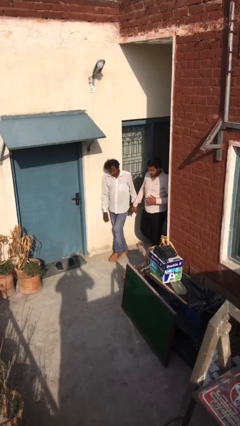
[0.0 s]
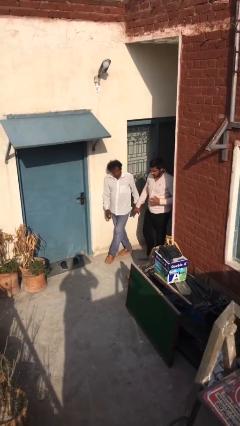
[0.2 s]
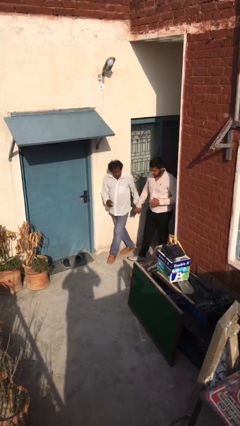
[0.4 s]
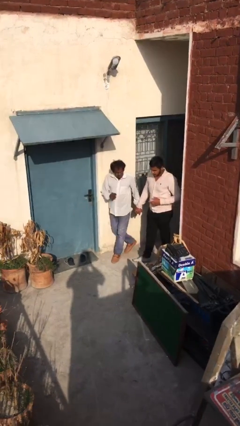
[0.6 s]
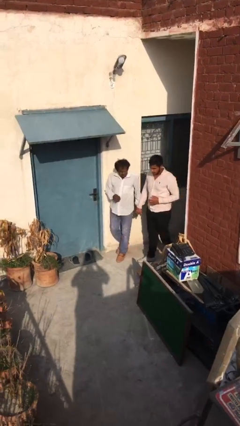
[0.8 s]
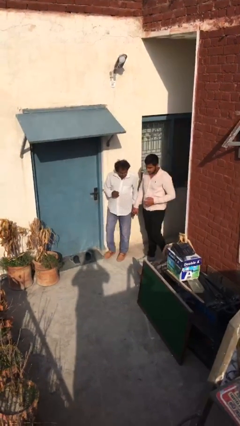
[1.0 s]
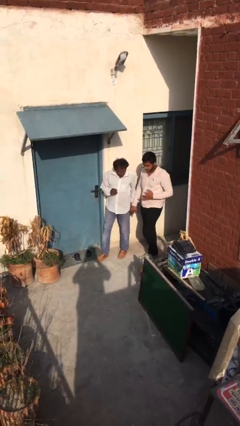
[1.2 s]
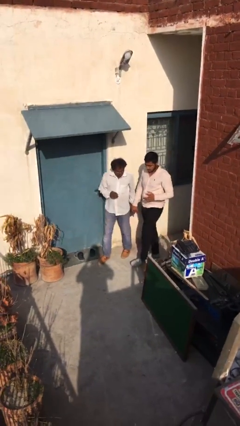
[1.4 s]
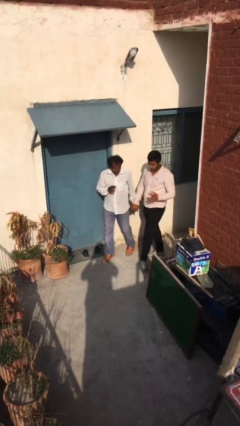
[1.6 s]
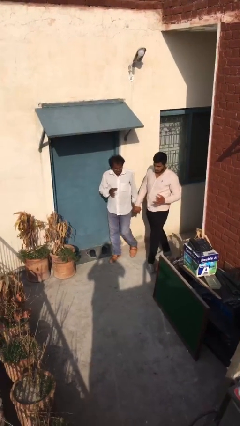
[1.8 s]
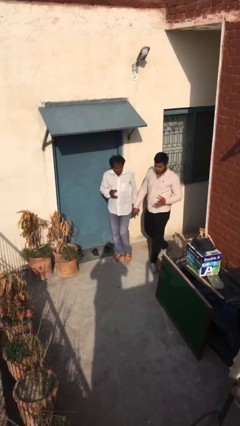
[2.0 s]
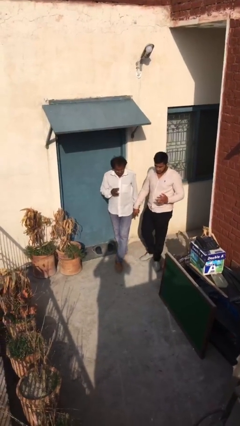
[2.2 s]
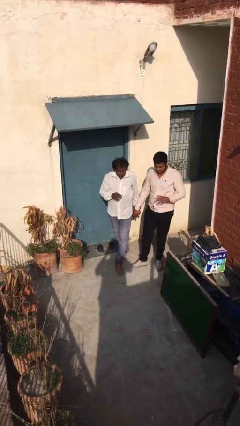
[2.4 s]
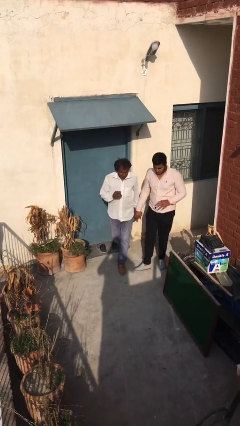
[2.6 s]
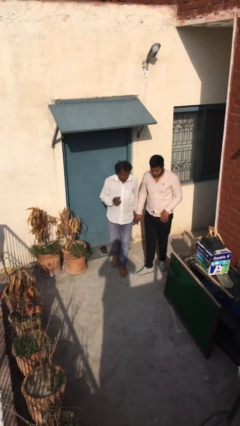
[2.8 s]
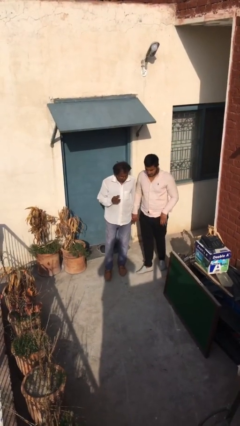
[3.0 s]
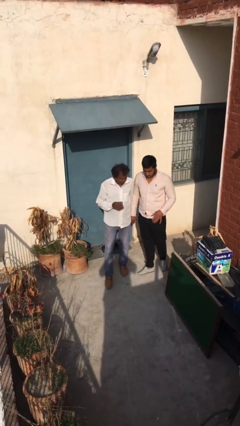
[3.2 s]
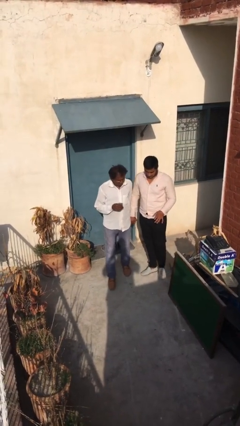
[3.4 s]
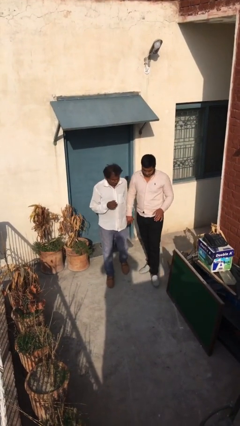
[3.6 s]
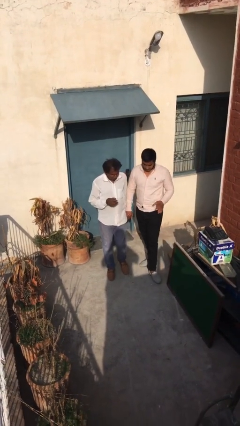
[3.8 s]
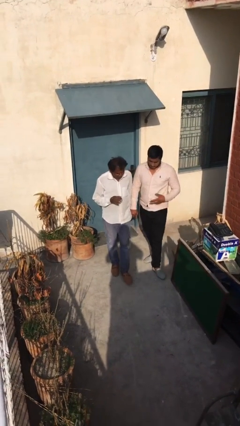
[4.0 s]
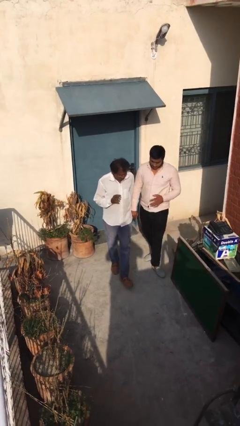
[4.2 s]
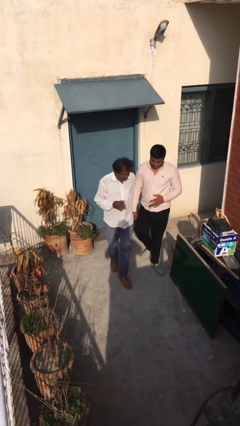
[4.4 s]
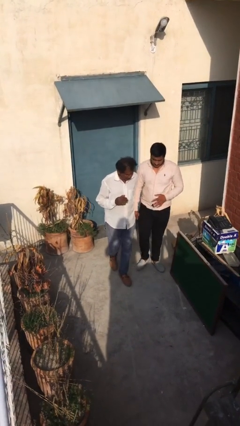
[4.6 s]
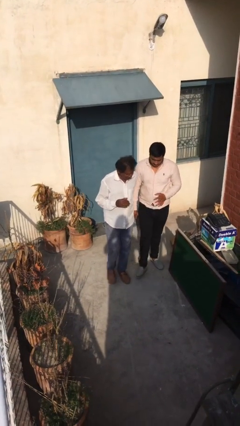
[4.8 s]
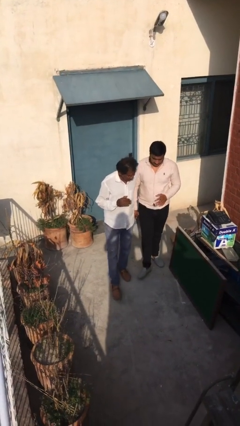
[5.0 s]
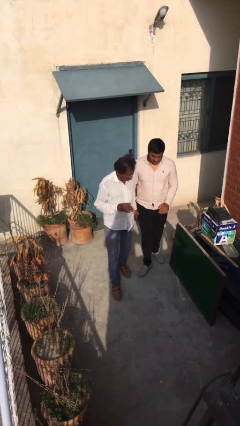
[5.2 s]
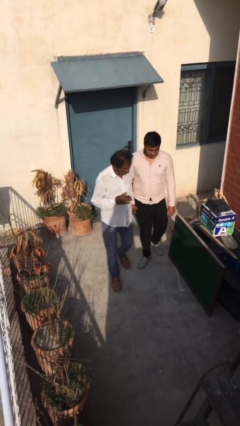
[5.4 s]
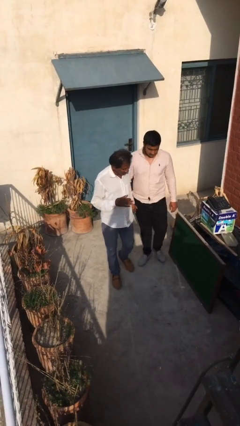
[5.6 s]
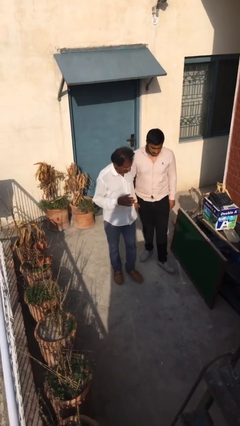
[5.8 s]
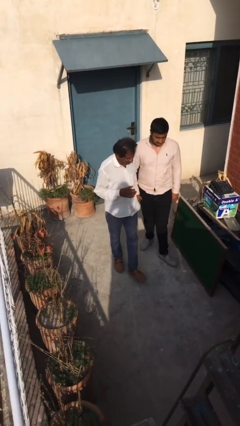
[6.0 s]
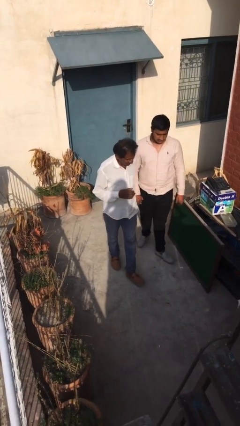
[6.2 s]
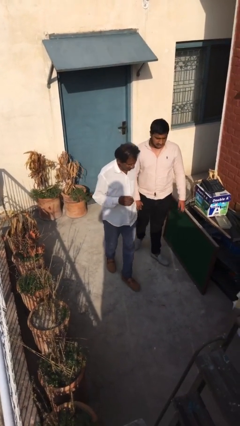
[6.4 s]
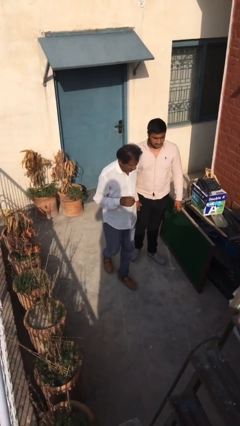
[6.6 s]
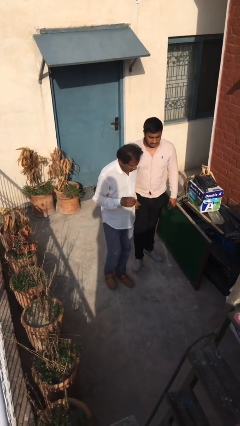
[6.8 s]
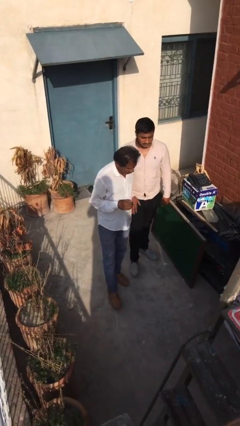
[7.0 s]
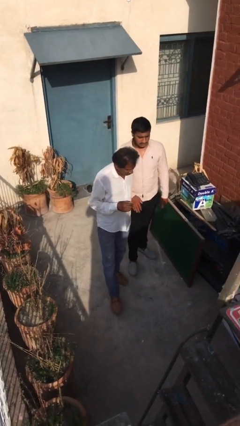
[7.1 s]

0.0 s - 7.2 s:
person holds hand

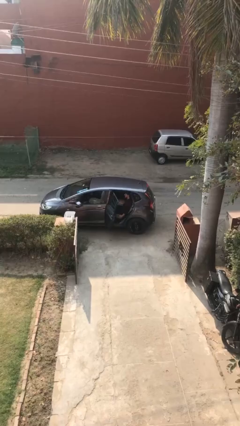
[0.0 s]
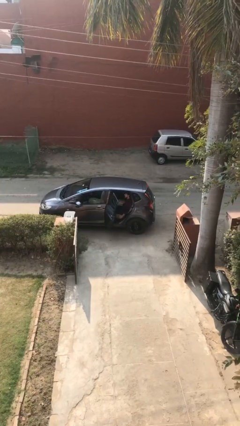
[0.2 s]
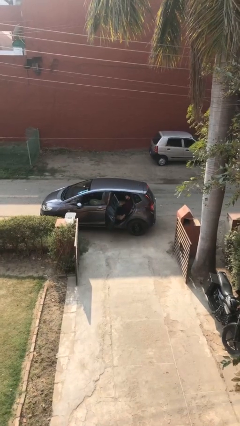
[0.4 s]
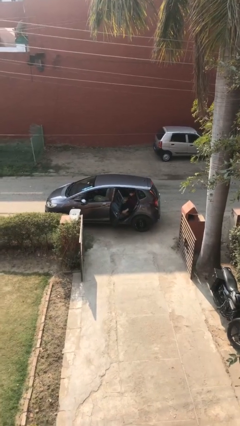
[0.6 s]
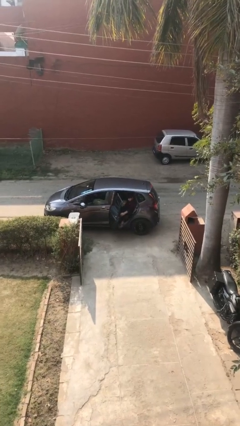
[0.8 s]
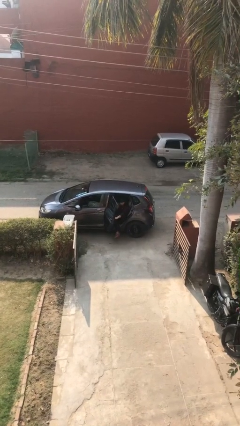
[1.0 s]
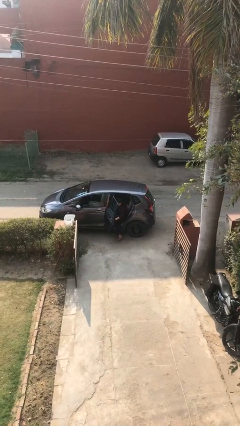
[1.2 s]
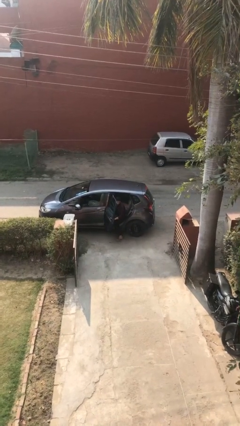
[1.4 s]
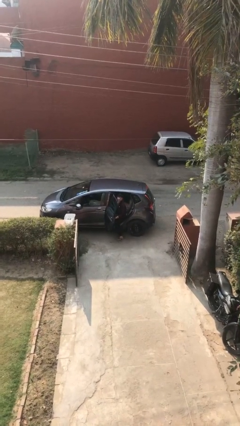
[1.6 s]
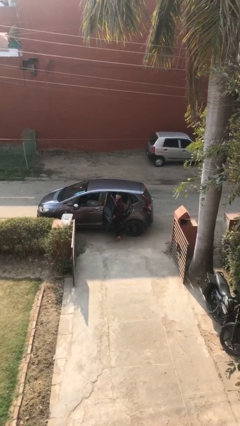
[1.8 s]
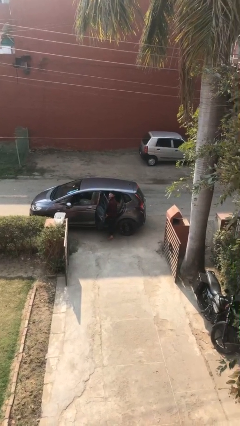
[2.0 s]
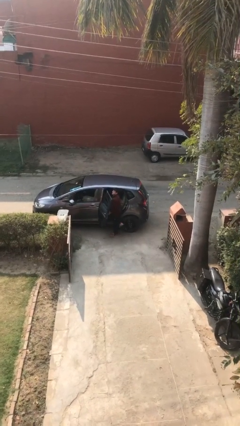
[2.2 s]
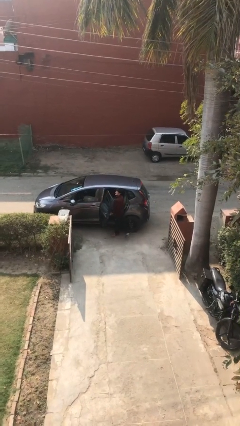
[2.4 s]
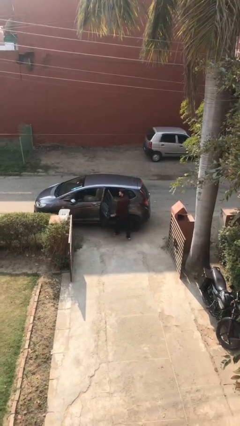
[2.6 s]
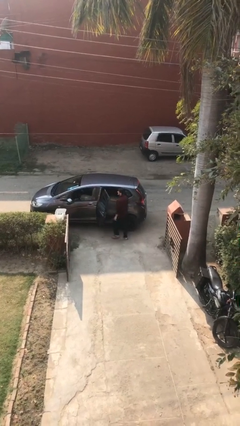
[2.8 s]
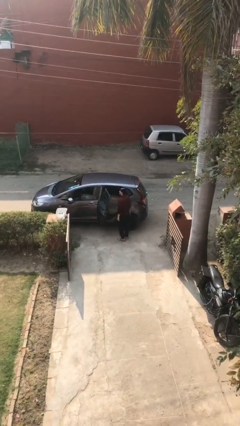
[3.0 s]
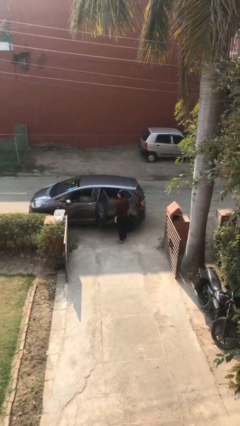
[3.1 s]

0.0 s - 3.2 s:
person exits car

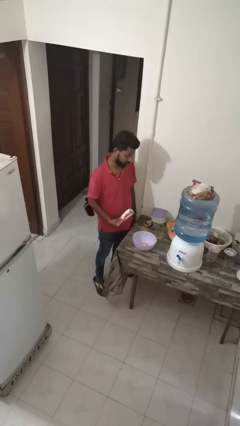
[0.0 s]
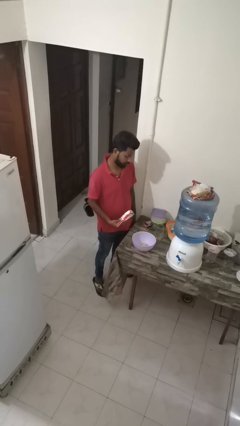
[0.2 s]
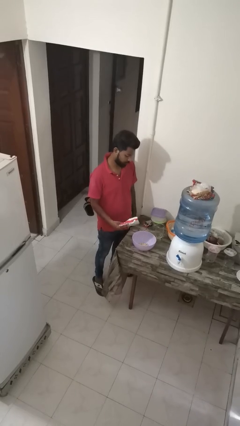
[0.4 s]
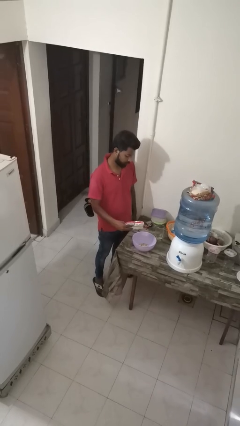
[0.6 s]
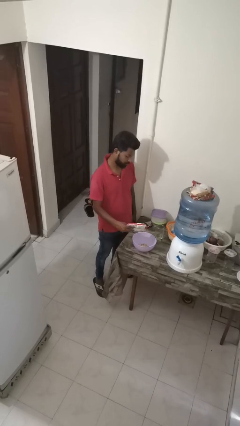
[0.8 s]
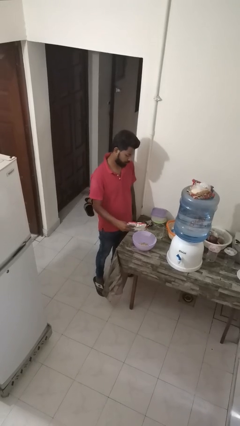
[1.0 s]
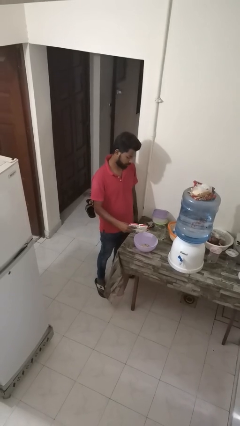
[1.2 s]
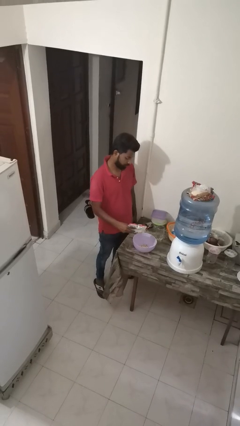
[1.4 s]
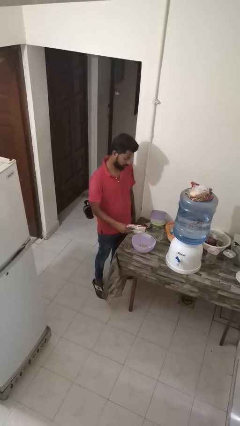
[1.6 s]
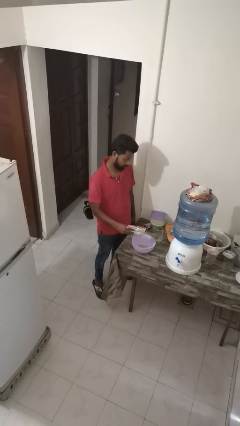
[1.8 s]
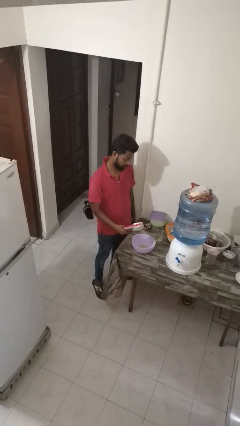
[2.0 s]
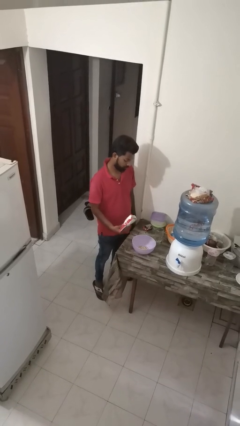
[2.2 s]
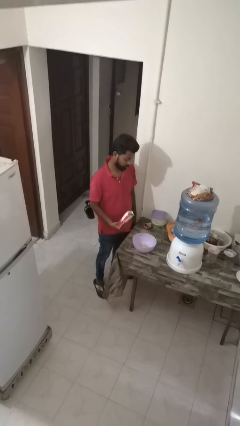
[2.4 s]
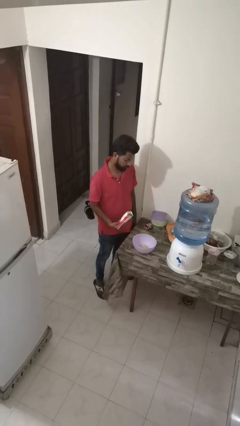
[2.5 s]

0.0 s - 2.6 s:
person pours into bowl

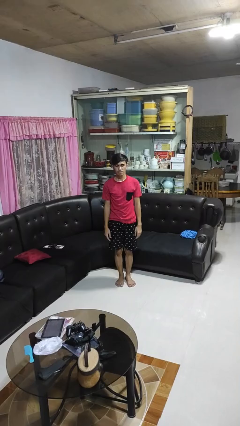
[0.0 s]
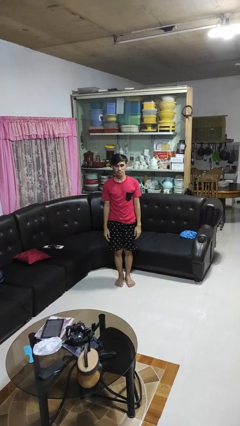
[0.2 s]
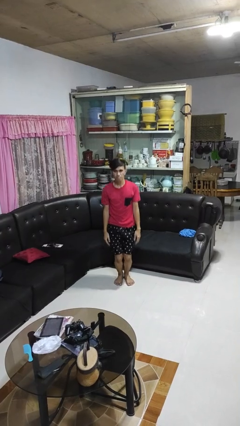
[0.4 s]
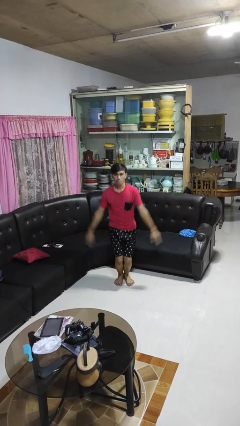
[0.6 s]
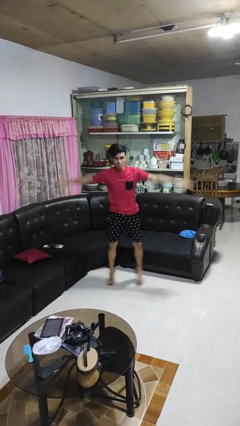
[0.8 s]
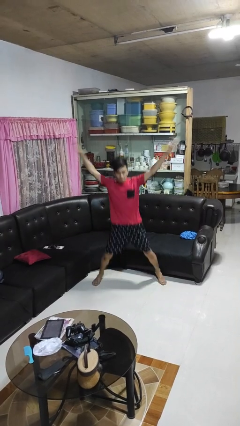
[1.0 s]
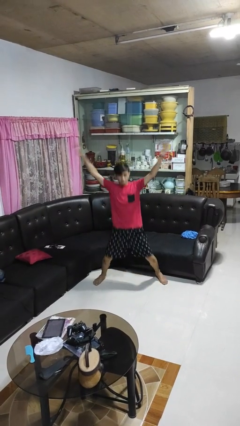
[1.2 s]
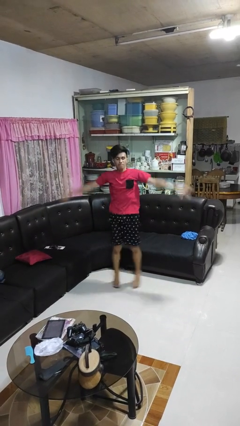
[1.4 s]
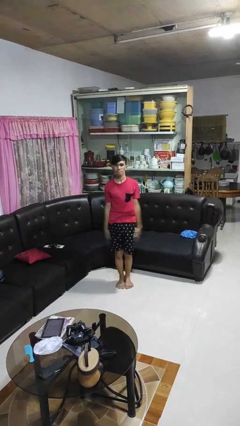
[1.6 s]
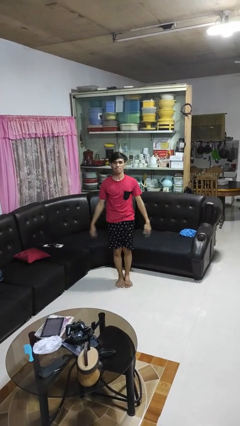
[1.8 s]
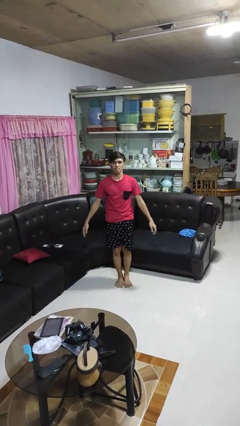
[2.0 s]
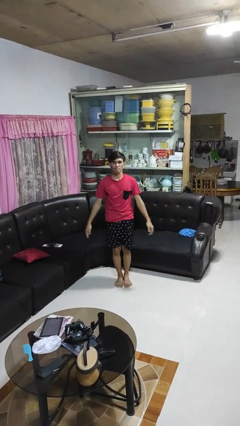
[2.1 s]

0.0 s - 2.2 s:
person exercises with jumping jacks

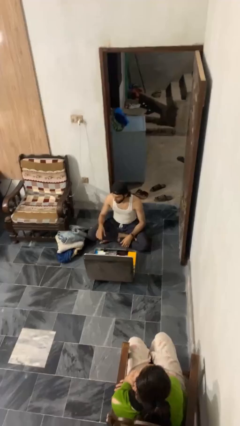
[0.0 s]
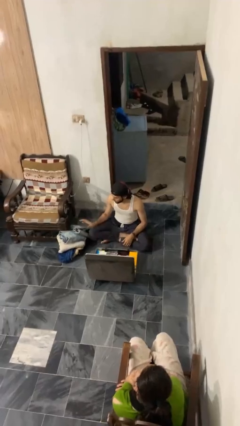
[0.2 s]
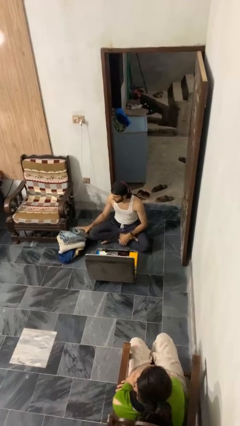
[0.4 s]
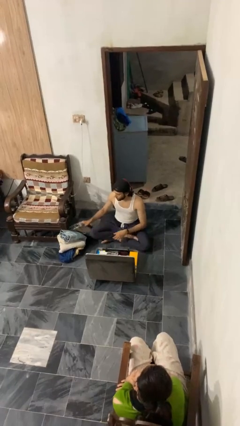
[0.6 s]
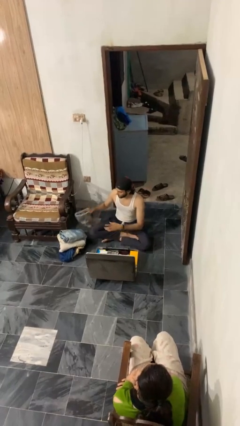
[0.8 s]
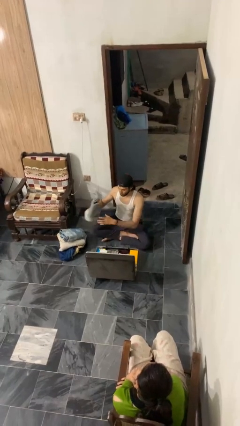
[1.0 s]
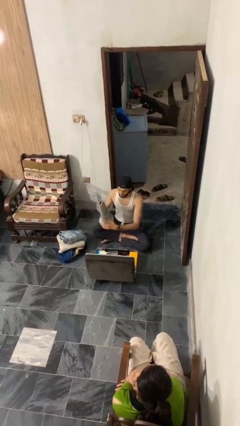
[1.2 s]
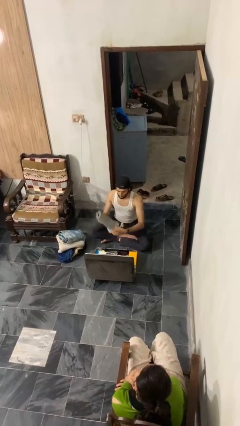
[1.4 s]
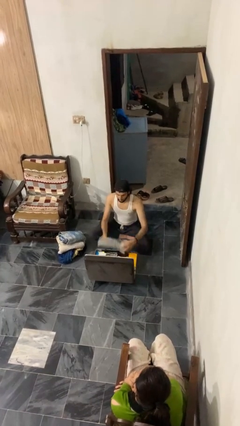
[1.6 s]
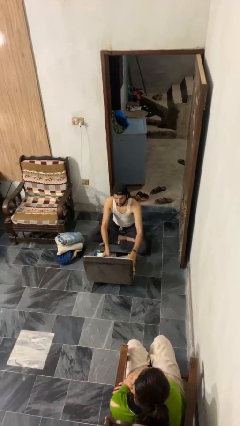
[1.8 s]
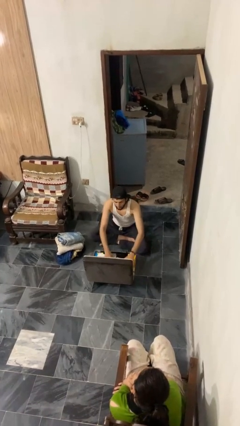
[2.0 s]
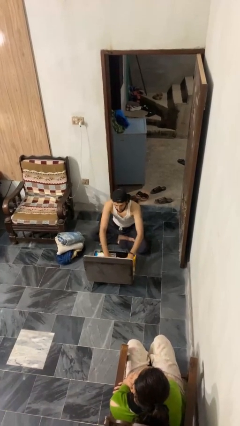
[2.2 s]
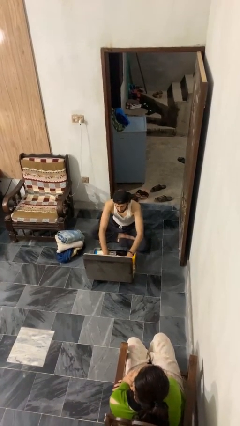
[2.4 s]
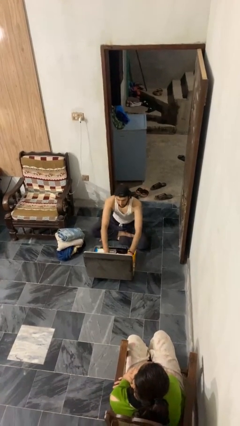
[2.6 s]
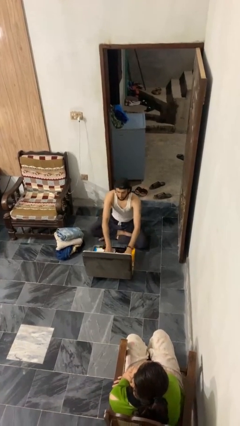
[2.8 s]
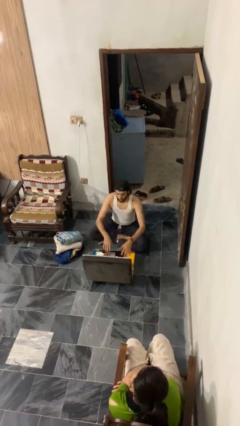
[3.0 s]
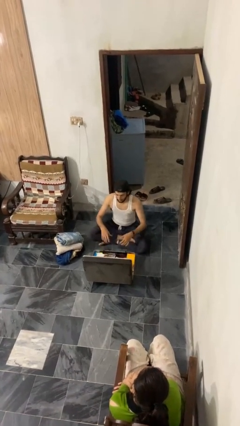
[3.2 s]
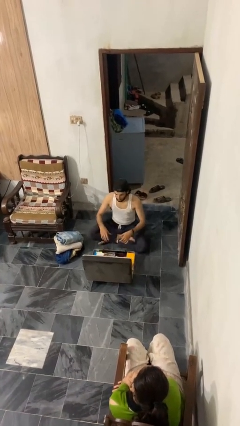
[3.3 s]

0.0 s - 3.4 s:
person loads clothes into suitcase
